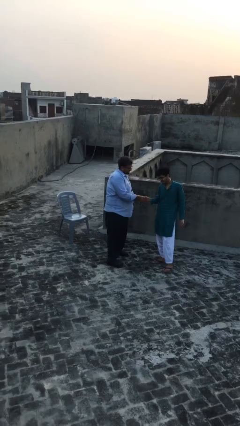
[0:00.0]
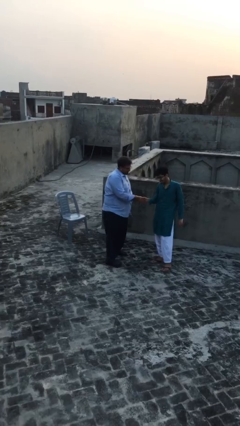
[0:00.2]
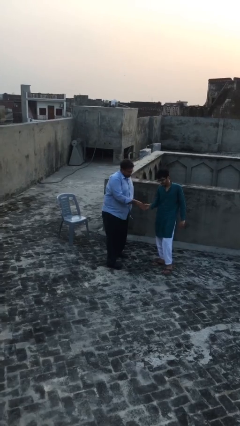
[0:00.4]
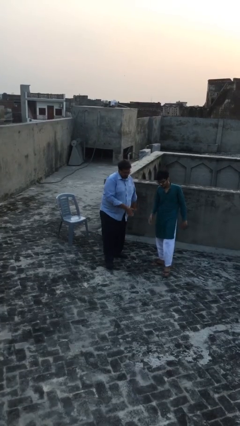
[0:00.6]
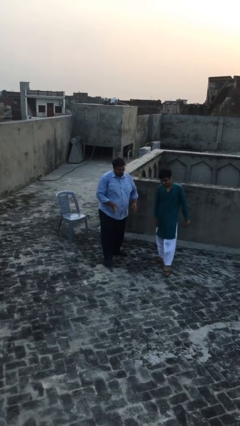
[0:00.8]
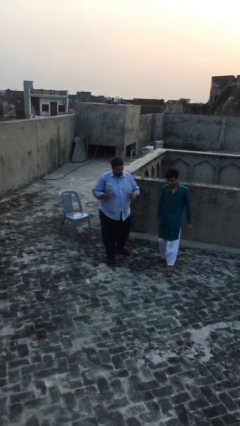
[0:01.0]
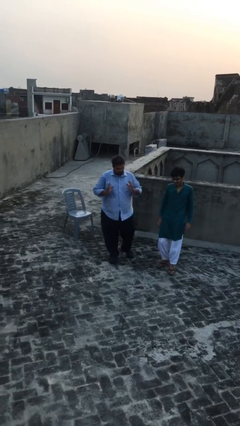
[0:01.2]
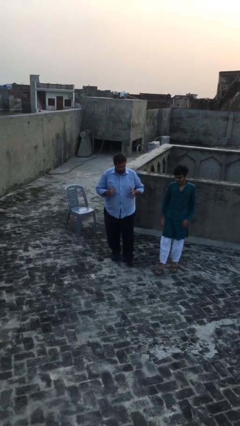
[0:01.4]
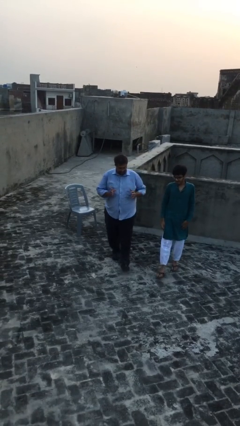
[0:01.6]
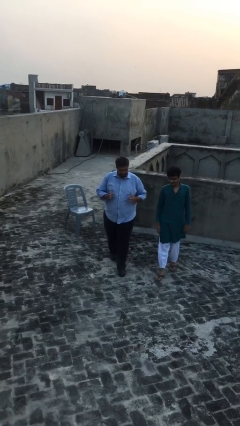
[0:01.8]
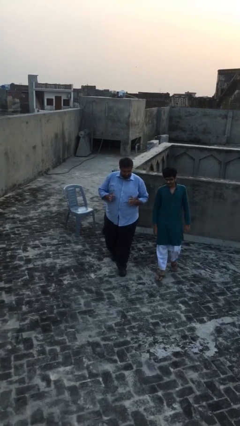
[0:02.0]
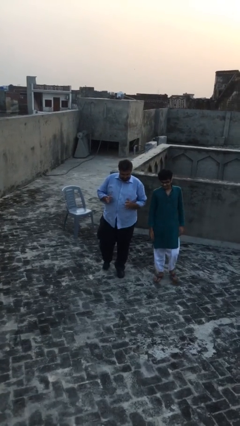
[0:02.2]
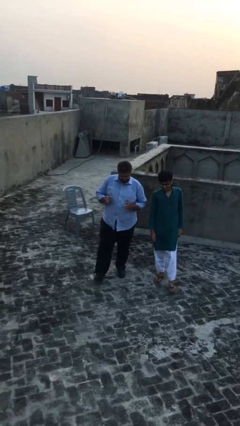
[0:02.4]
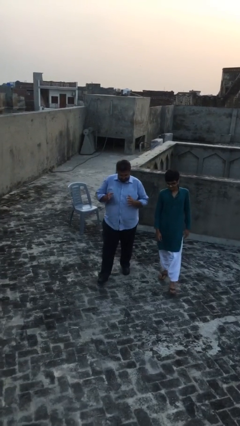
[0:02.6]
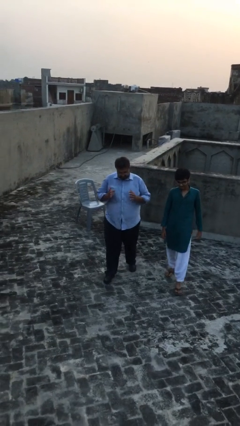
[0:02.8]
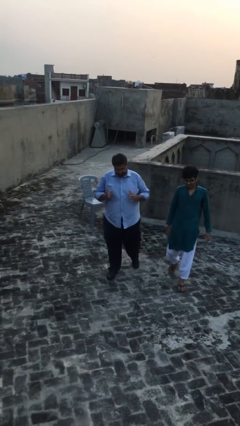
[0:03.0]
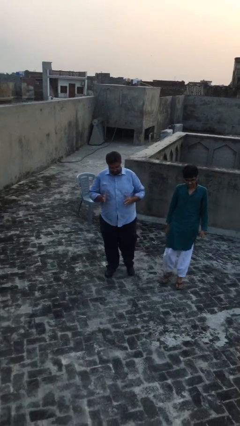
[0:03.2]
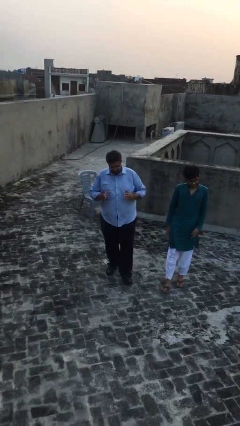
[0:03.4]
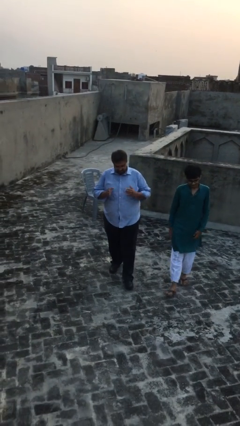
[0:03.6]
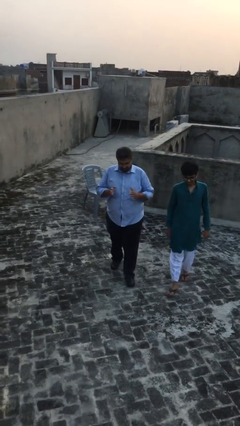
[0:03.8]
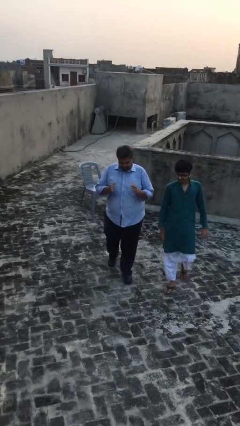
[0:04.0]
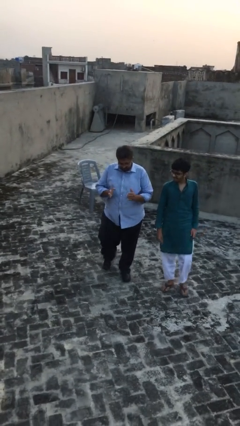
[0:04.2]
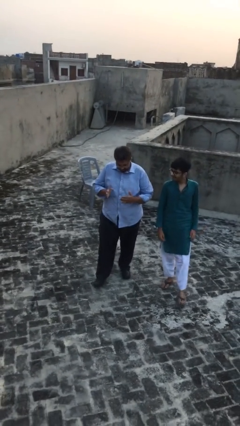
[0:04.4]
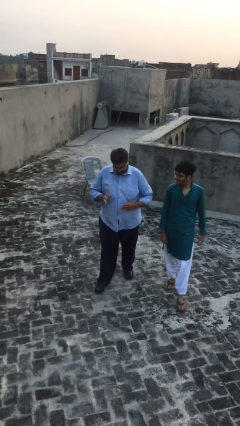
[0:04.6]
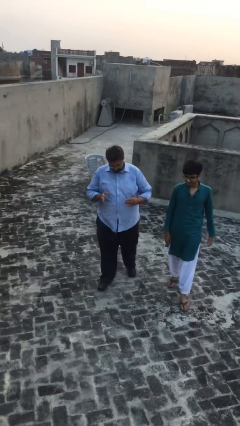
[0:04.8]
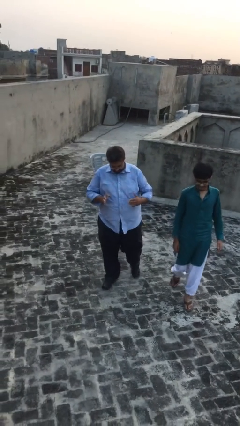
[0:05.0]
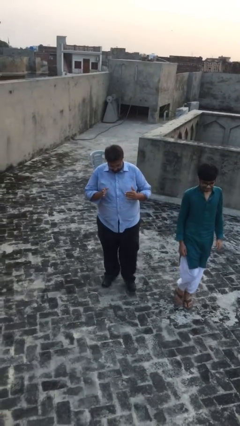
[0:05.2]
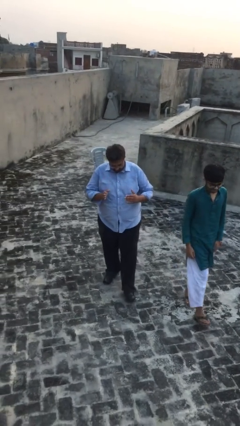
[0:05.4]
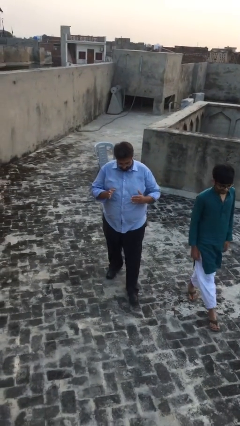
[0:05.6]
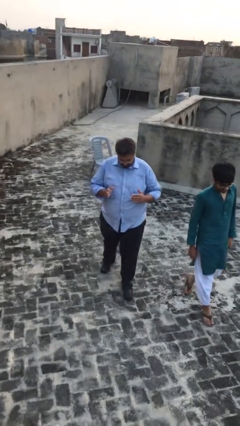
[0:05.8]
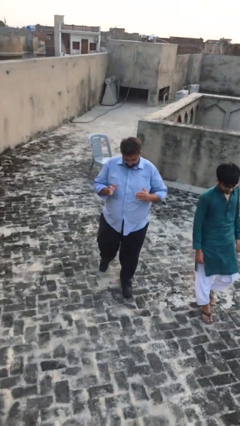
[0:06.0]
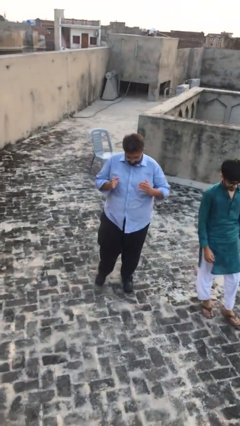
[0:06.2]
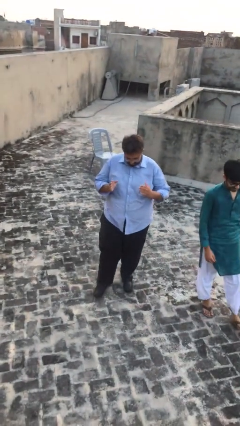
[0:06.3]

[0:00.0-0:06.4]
person talks to person

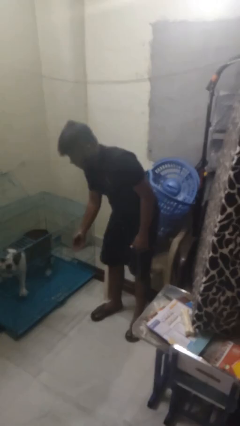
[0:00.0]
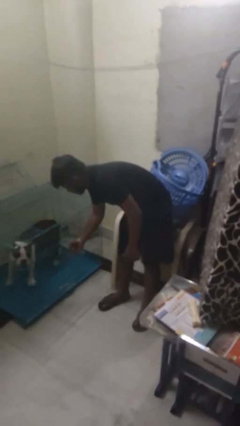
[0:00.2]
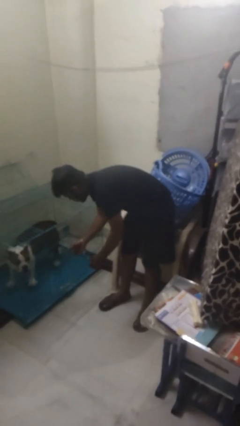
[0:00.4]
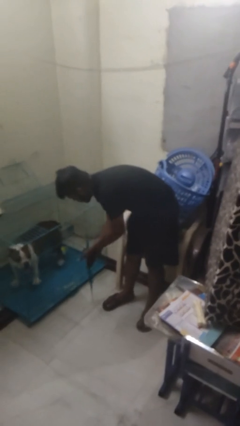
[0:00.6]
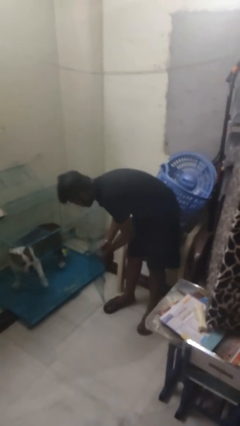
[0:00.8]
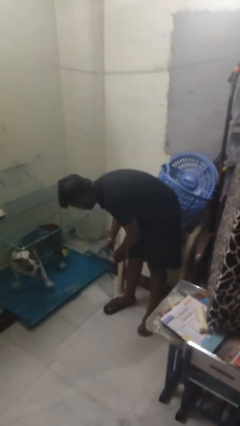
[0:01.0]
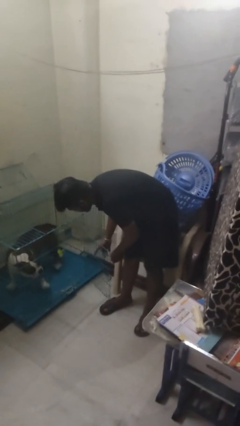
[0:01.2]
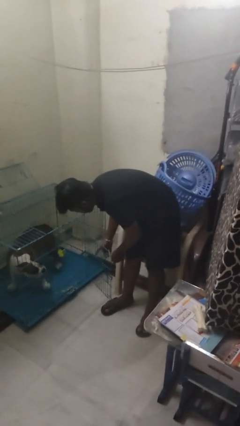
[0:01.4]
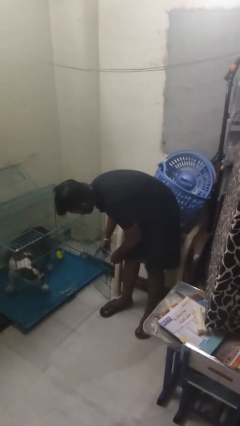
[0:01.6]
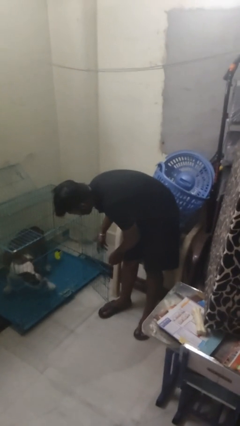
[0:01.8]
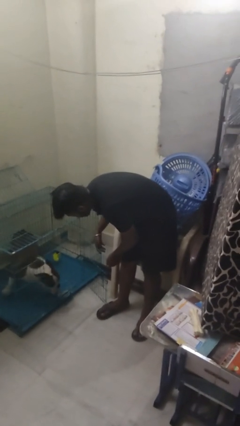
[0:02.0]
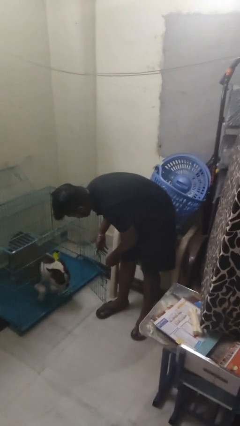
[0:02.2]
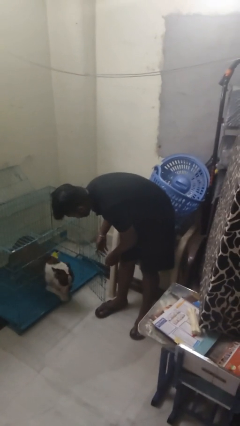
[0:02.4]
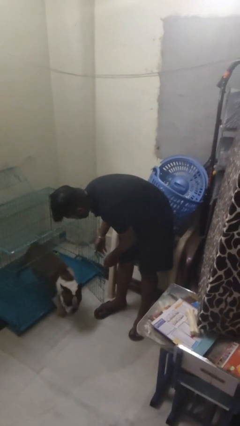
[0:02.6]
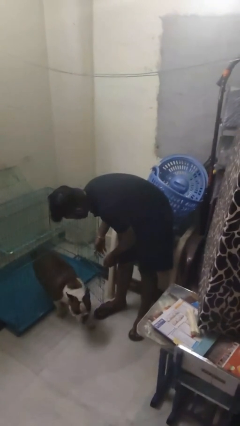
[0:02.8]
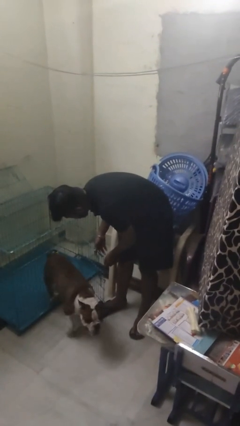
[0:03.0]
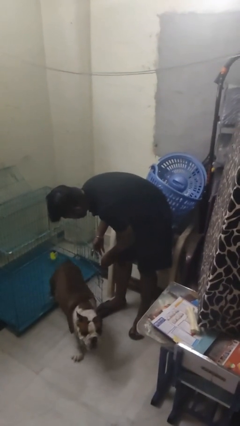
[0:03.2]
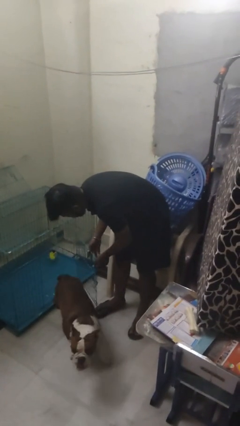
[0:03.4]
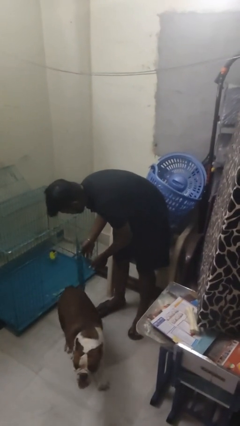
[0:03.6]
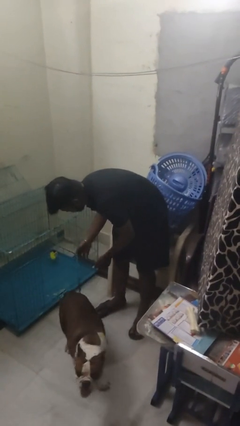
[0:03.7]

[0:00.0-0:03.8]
person uncrates dog

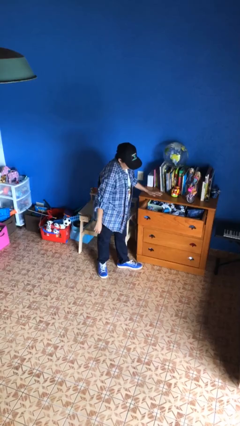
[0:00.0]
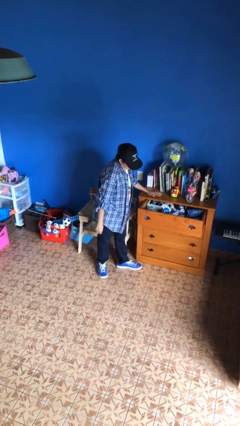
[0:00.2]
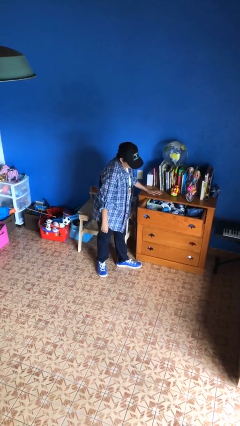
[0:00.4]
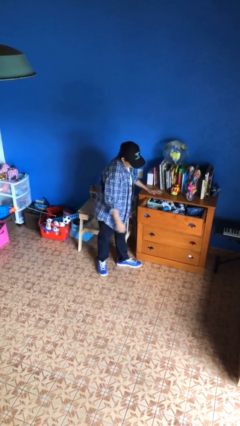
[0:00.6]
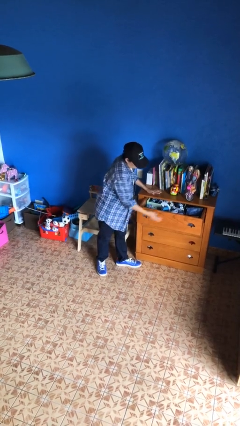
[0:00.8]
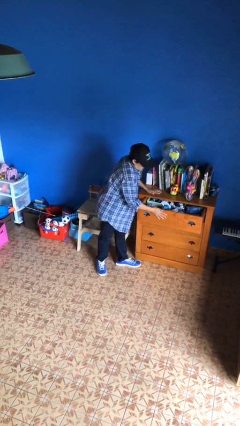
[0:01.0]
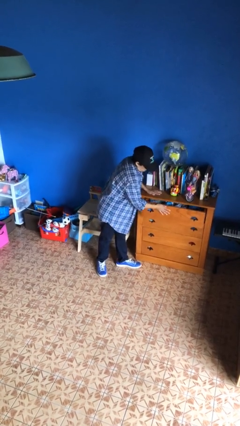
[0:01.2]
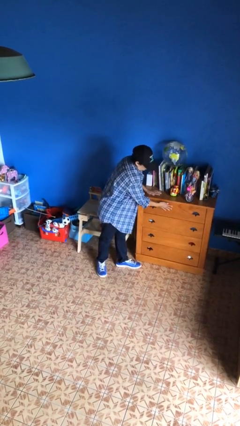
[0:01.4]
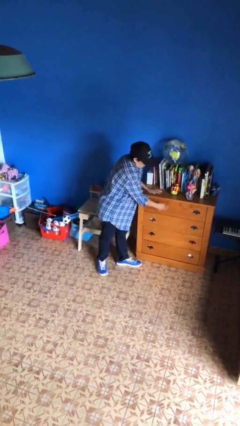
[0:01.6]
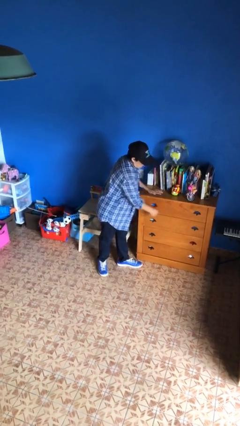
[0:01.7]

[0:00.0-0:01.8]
person closes dresser drawer

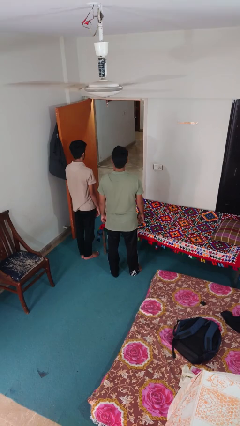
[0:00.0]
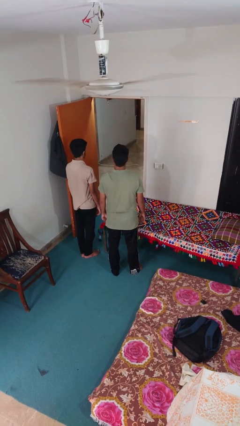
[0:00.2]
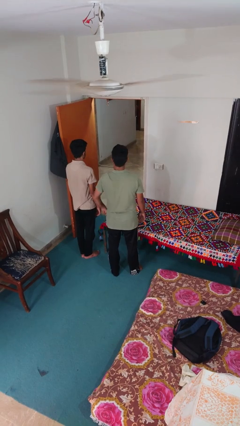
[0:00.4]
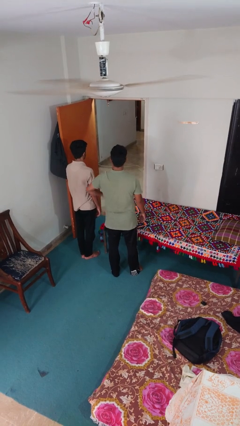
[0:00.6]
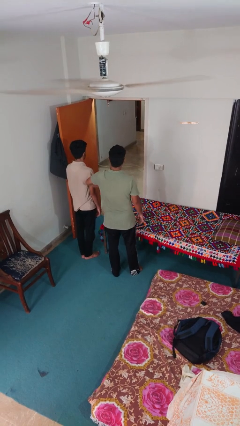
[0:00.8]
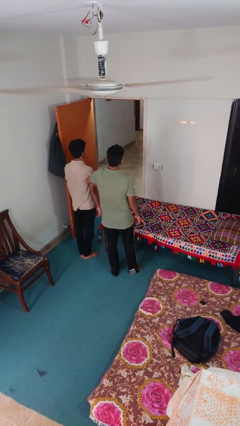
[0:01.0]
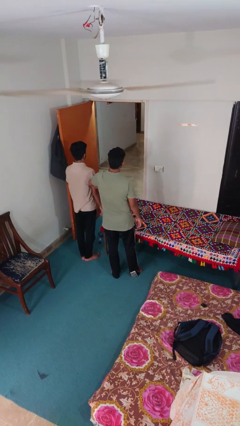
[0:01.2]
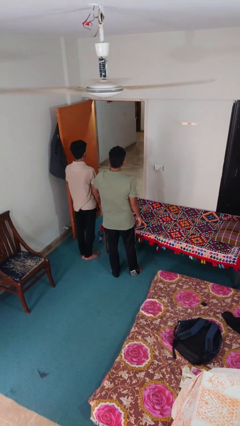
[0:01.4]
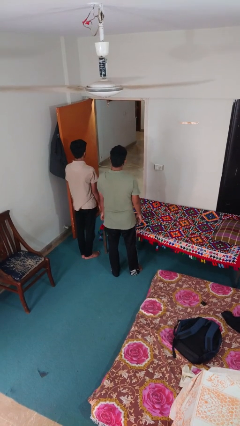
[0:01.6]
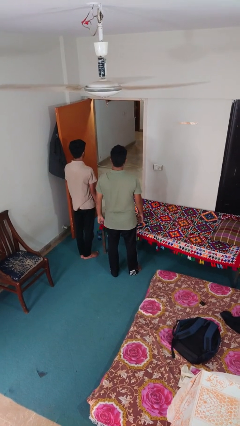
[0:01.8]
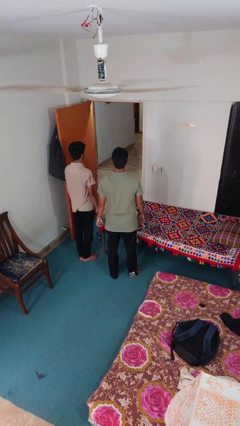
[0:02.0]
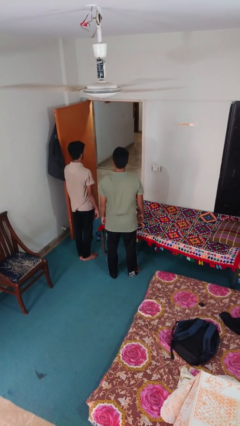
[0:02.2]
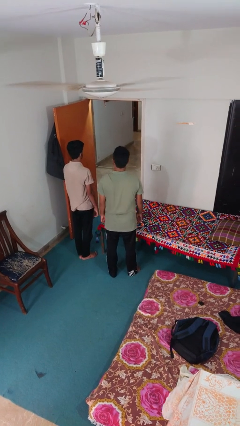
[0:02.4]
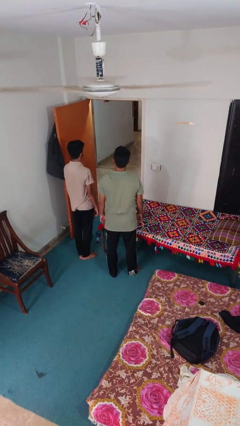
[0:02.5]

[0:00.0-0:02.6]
person nudges person with elbow

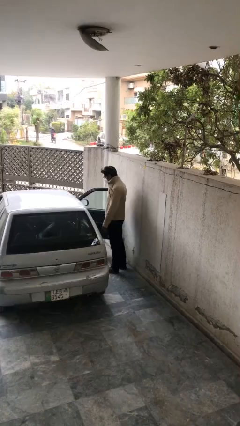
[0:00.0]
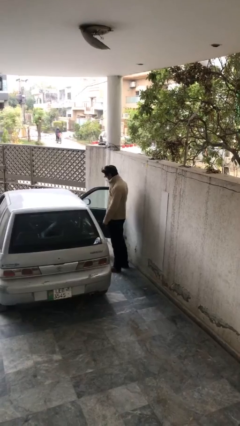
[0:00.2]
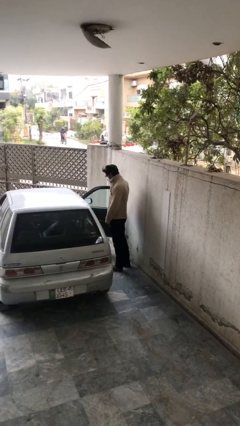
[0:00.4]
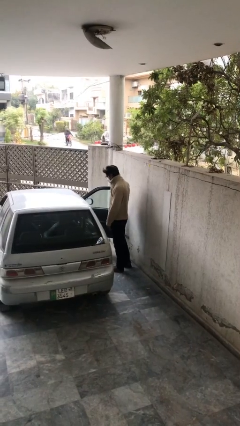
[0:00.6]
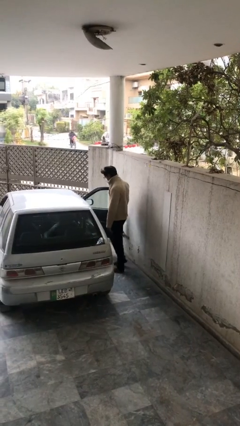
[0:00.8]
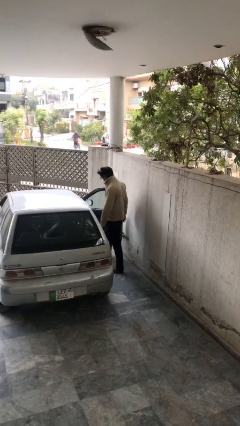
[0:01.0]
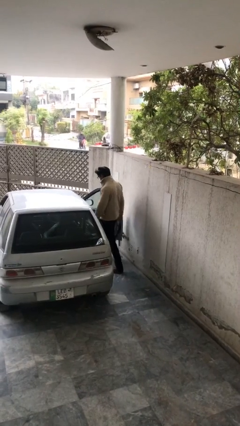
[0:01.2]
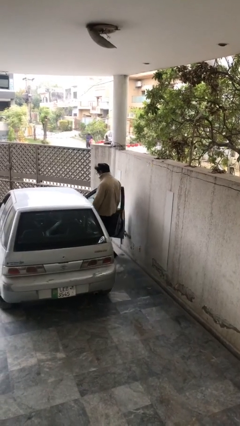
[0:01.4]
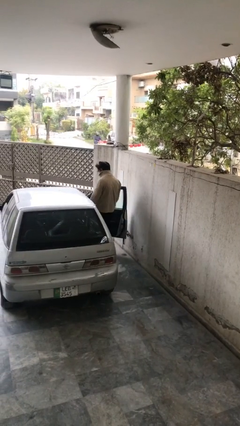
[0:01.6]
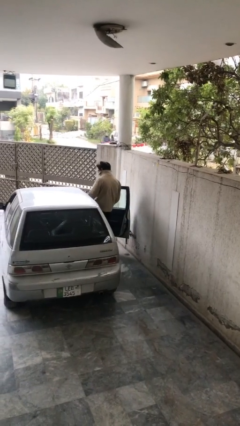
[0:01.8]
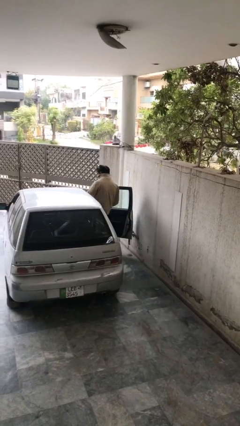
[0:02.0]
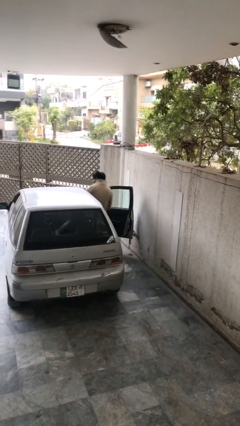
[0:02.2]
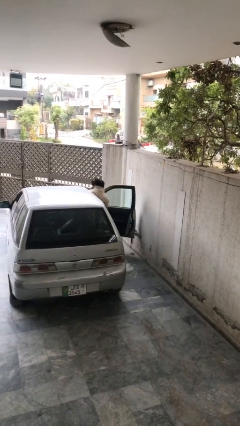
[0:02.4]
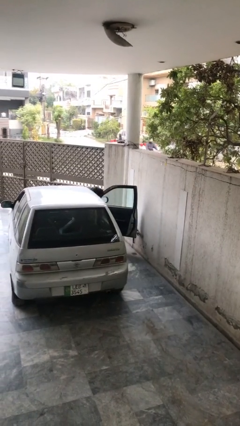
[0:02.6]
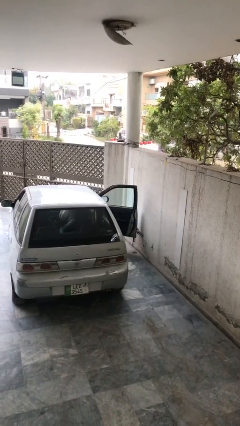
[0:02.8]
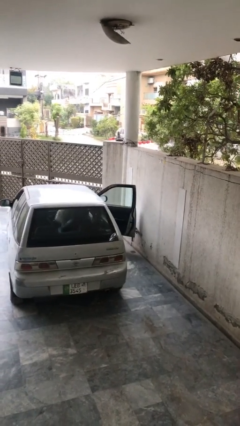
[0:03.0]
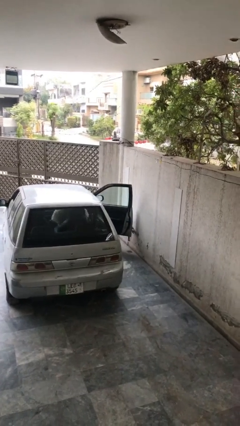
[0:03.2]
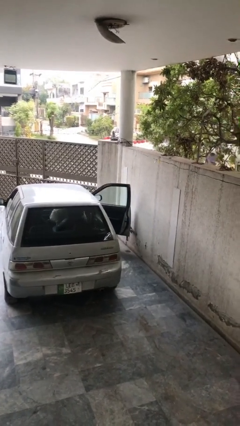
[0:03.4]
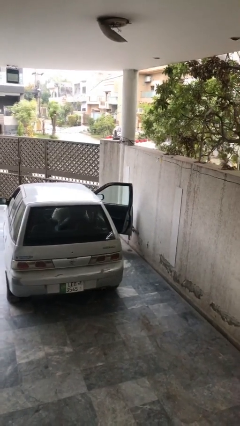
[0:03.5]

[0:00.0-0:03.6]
person enters car
